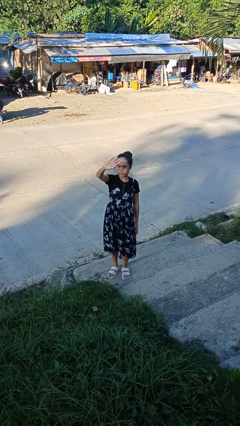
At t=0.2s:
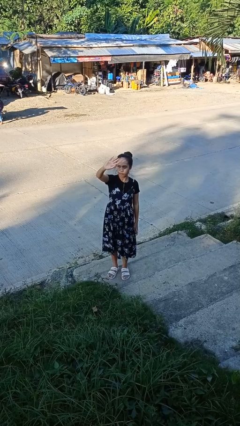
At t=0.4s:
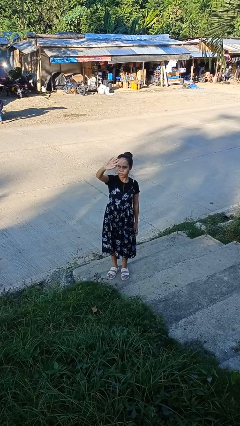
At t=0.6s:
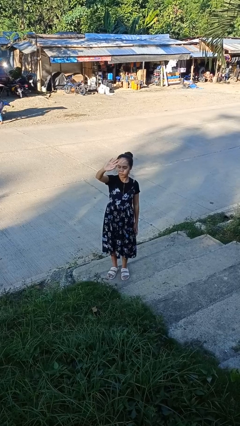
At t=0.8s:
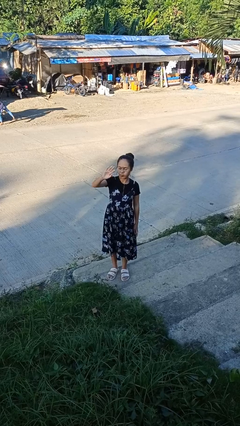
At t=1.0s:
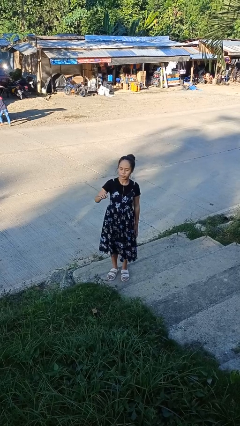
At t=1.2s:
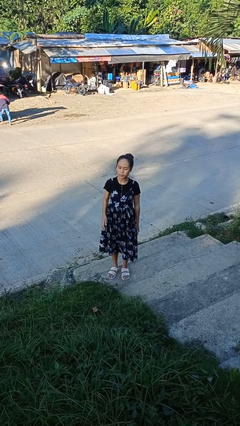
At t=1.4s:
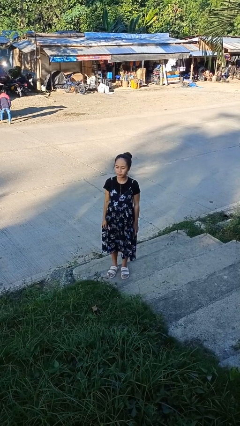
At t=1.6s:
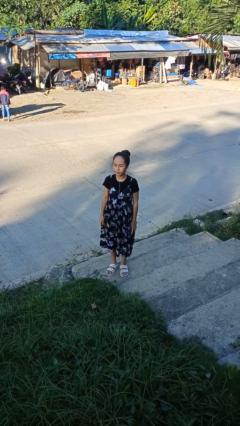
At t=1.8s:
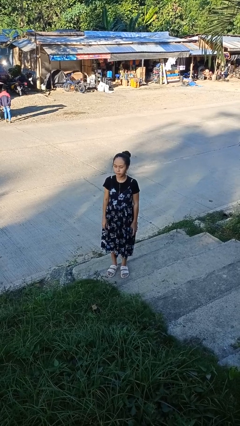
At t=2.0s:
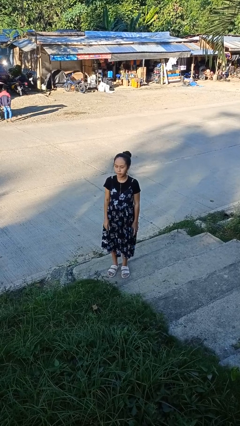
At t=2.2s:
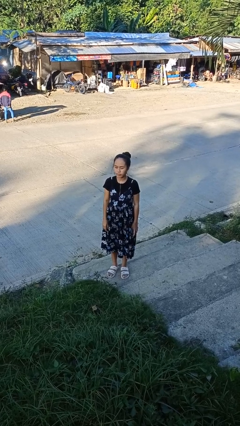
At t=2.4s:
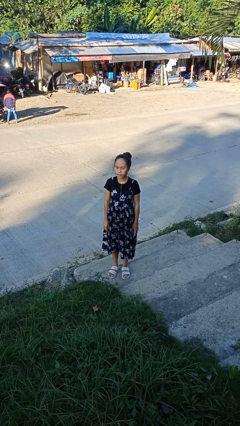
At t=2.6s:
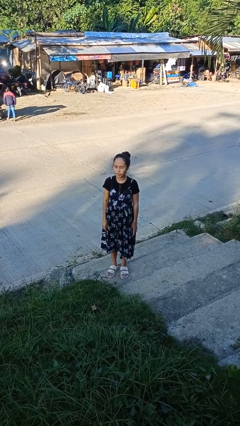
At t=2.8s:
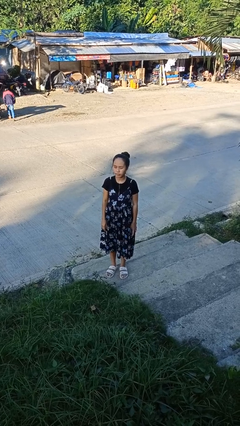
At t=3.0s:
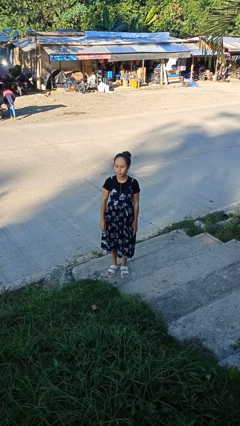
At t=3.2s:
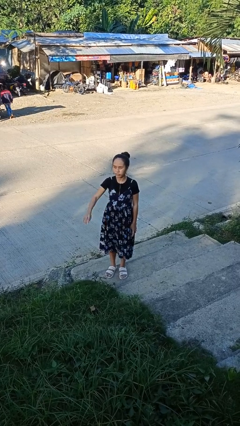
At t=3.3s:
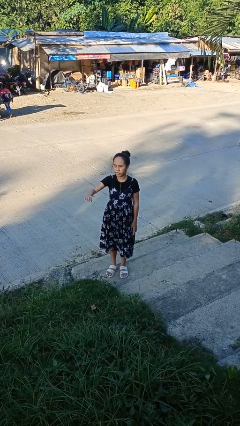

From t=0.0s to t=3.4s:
person shades eyes

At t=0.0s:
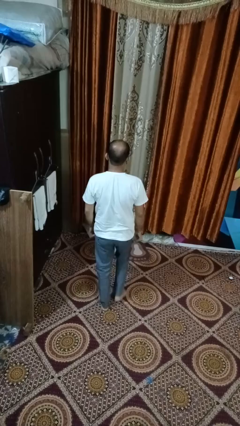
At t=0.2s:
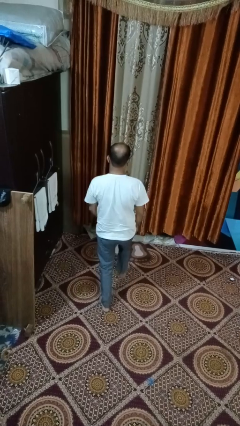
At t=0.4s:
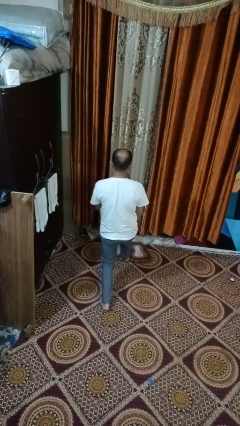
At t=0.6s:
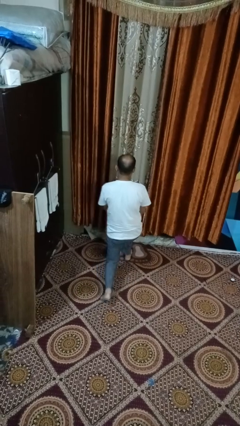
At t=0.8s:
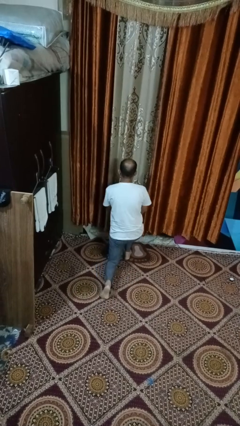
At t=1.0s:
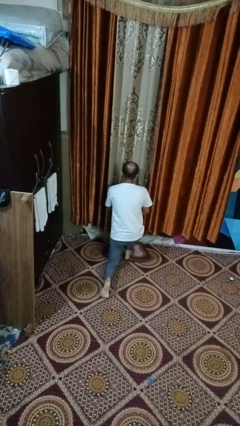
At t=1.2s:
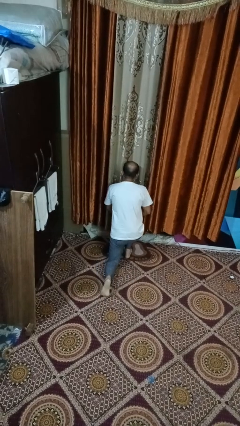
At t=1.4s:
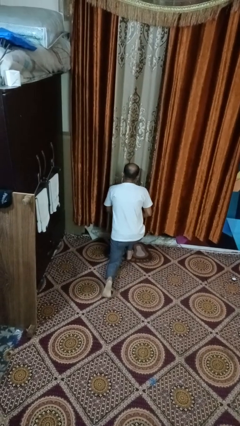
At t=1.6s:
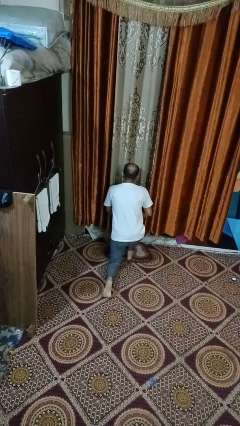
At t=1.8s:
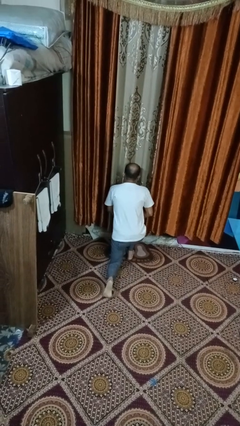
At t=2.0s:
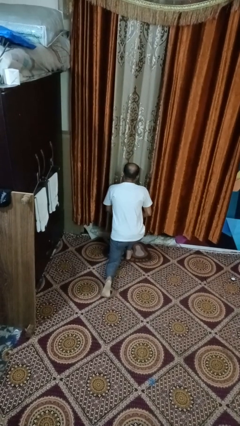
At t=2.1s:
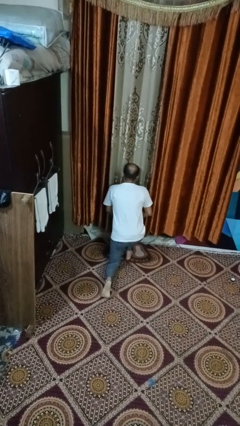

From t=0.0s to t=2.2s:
person kneels

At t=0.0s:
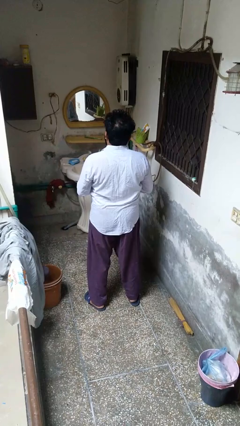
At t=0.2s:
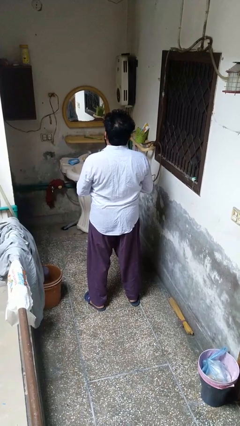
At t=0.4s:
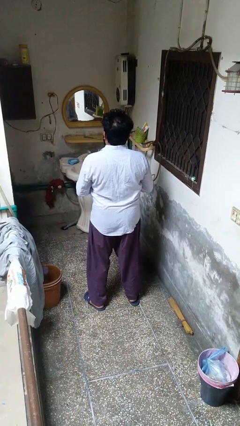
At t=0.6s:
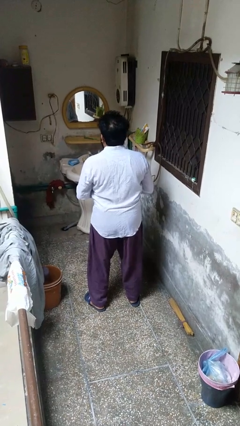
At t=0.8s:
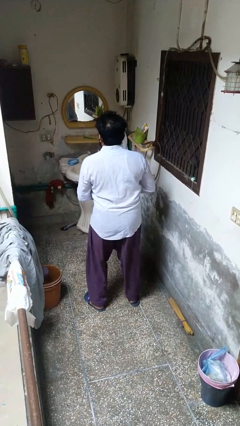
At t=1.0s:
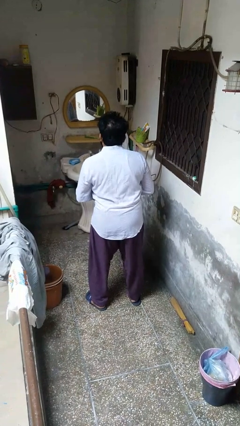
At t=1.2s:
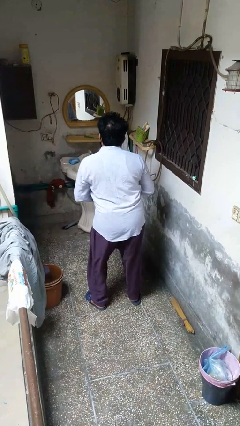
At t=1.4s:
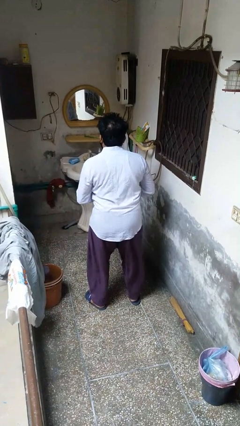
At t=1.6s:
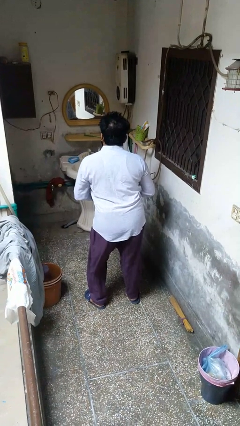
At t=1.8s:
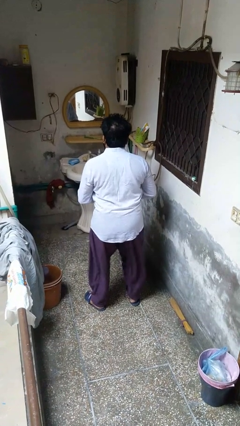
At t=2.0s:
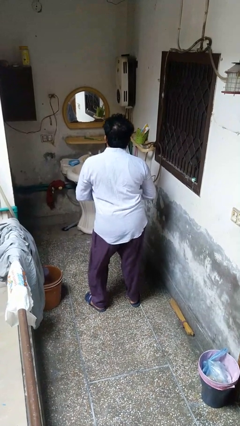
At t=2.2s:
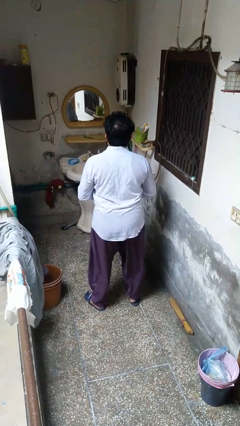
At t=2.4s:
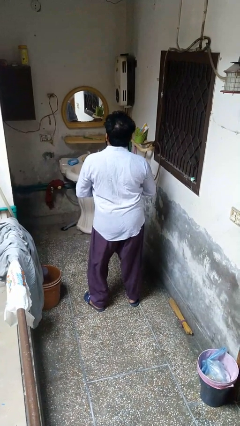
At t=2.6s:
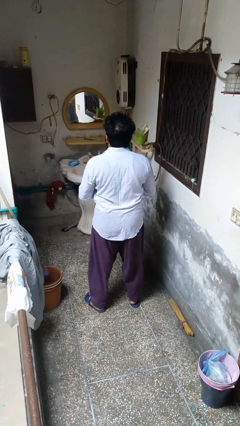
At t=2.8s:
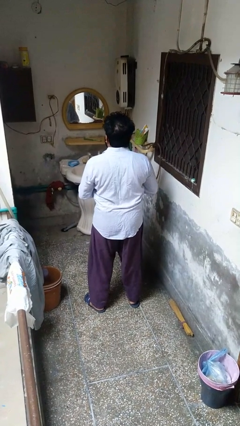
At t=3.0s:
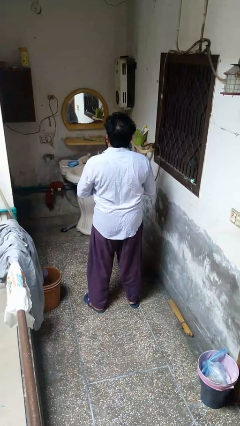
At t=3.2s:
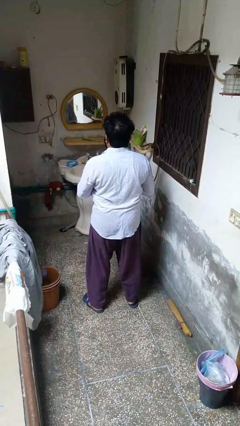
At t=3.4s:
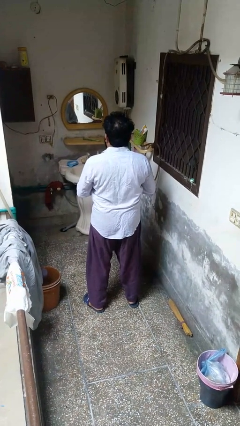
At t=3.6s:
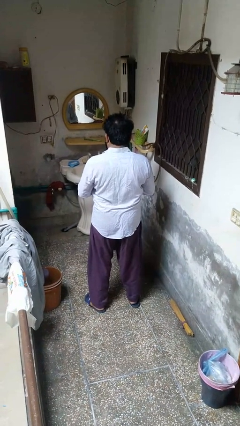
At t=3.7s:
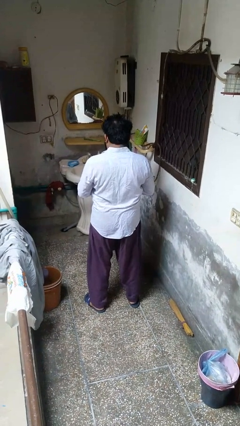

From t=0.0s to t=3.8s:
person wiggles hips

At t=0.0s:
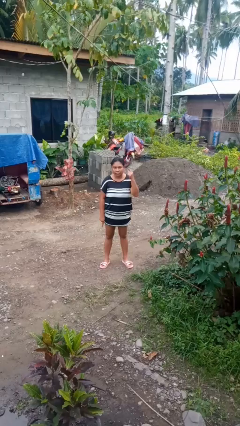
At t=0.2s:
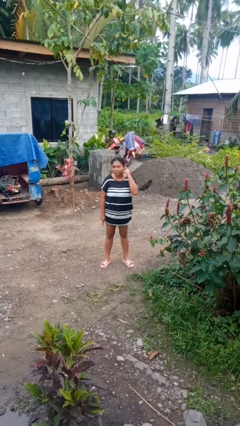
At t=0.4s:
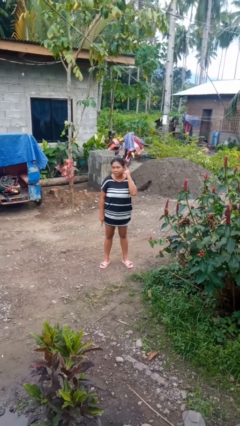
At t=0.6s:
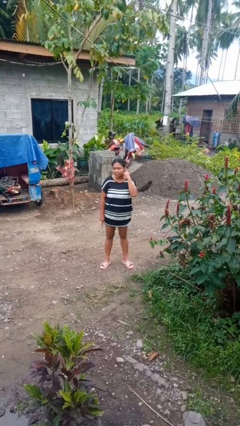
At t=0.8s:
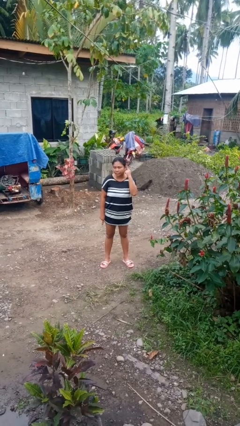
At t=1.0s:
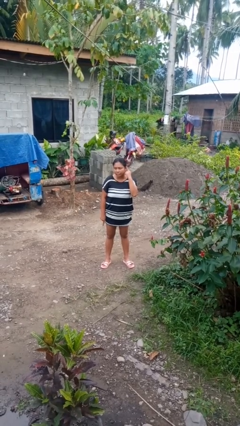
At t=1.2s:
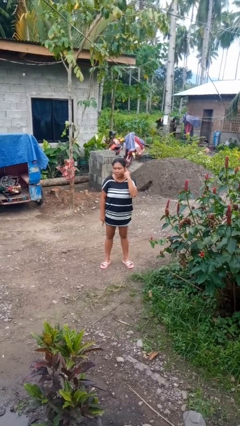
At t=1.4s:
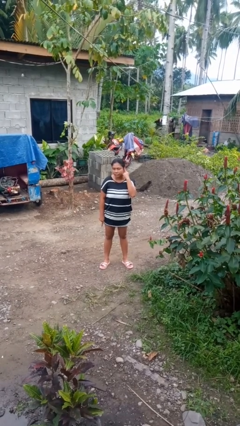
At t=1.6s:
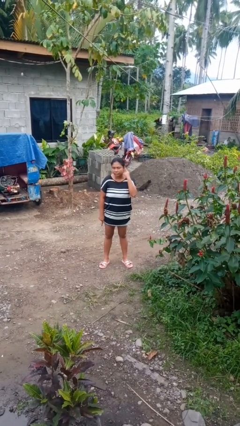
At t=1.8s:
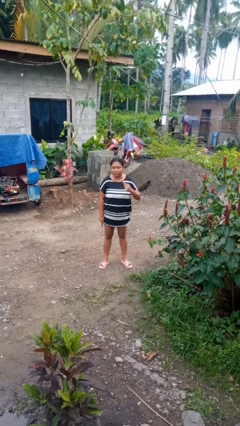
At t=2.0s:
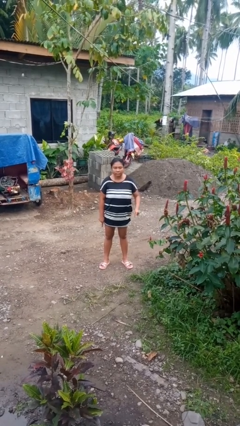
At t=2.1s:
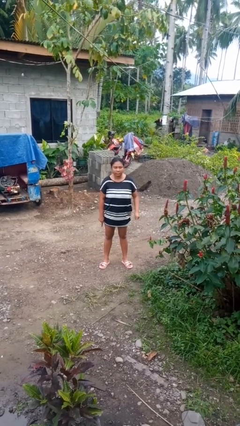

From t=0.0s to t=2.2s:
person gestures listen closely

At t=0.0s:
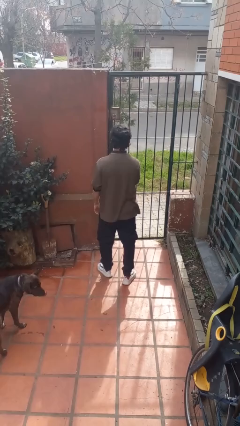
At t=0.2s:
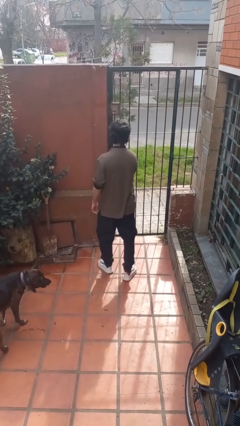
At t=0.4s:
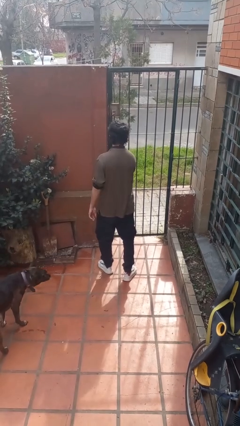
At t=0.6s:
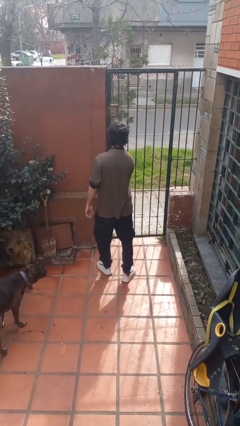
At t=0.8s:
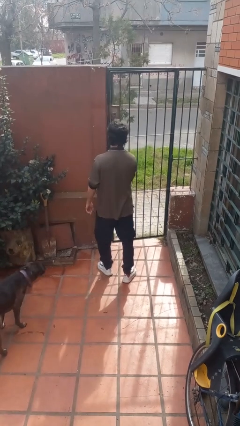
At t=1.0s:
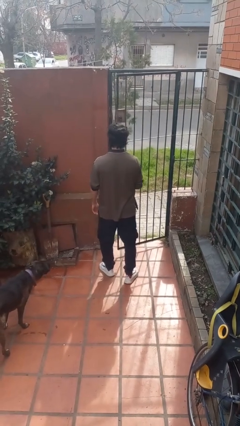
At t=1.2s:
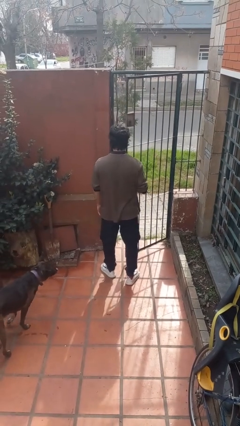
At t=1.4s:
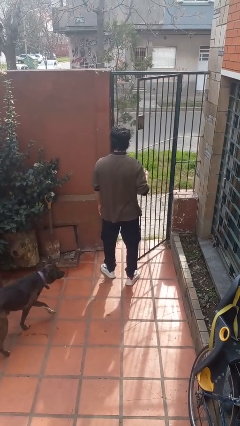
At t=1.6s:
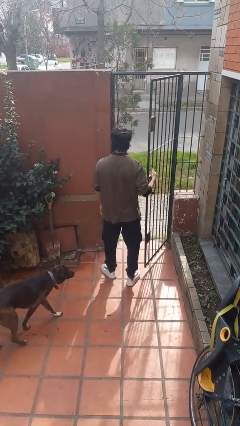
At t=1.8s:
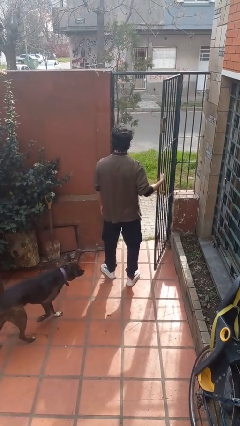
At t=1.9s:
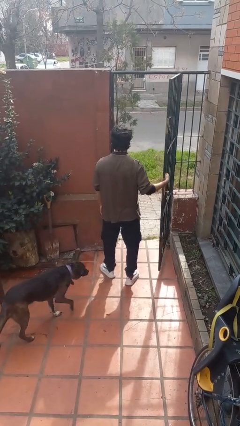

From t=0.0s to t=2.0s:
person opens gate

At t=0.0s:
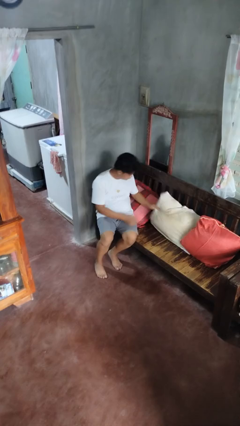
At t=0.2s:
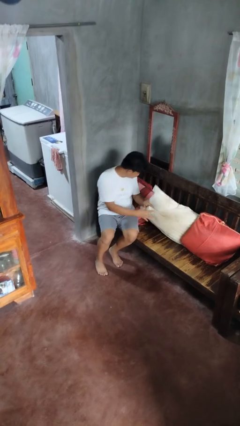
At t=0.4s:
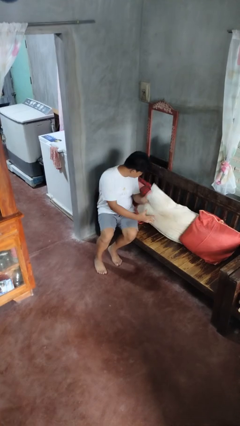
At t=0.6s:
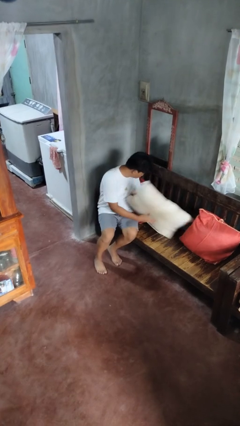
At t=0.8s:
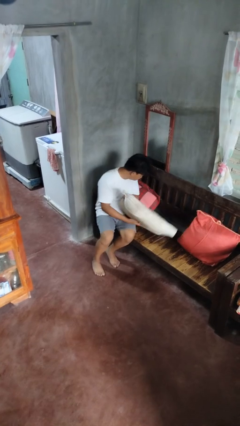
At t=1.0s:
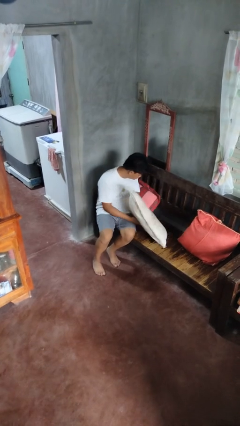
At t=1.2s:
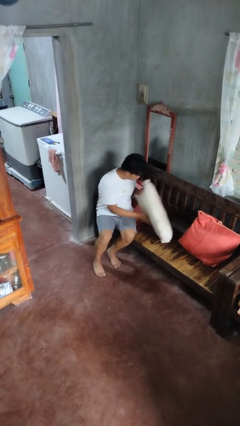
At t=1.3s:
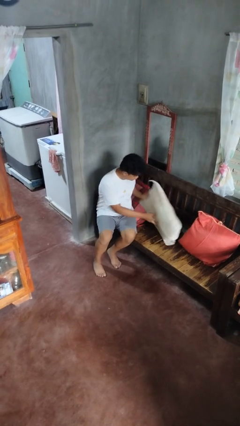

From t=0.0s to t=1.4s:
person searches in couch

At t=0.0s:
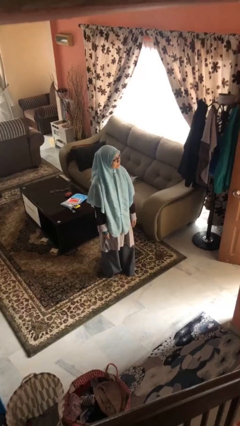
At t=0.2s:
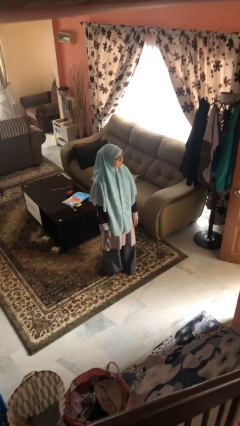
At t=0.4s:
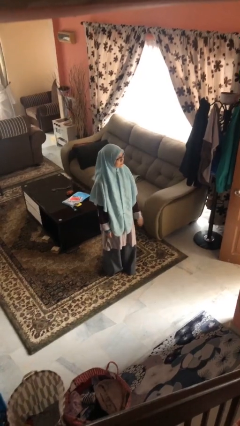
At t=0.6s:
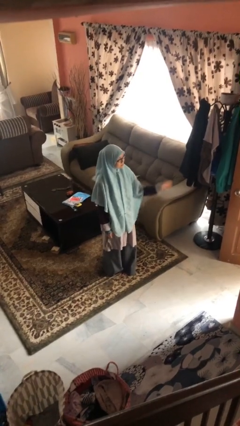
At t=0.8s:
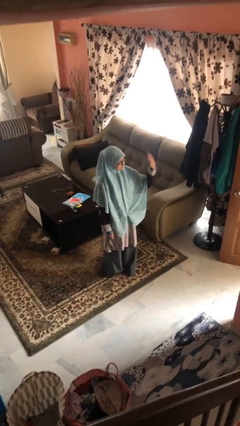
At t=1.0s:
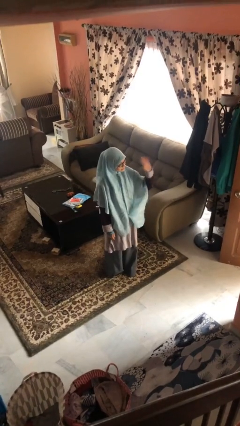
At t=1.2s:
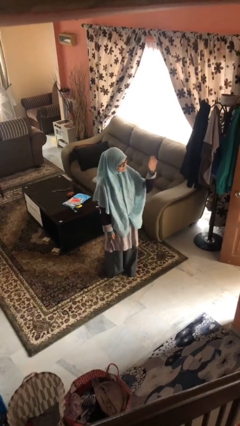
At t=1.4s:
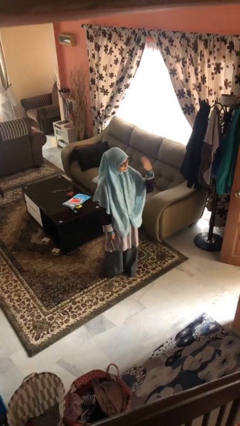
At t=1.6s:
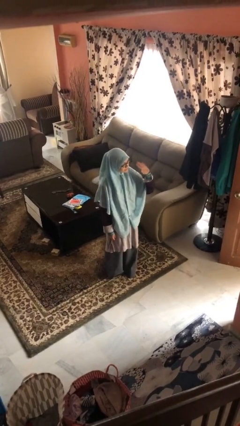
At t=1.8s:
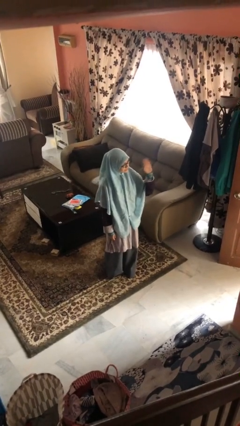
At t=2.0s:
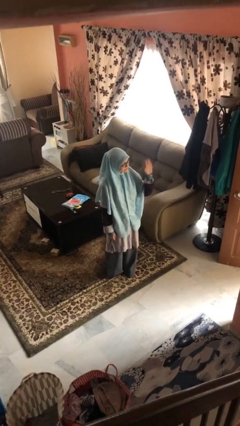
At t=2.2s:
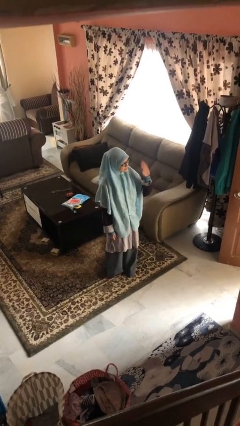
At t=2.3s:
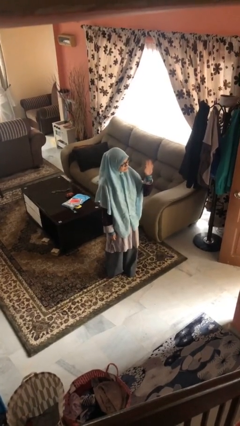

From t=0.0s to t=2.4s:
person waves at person
